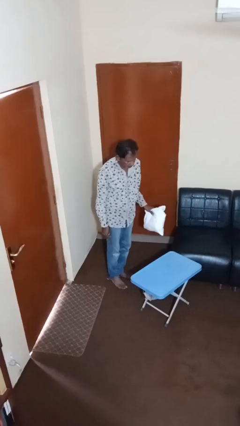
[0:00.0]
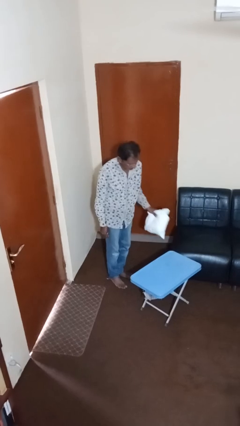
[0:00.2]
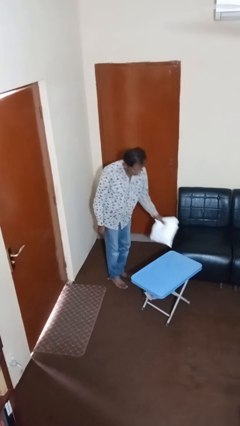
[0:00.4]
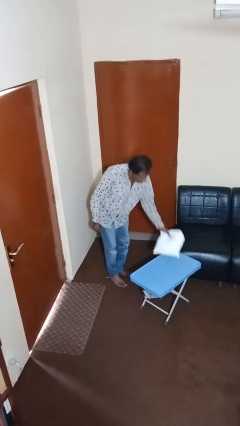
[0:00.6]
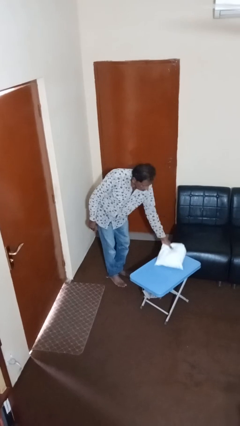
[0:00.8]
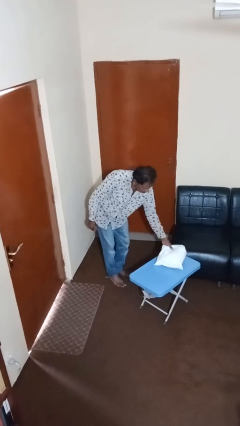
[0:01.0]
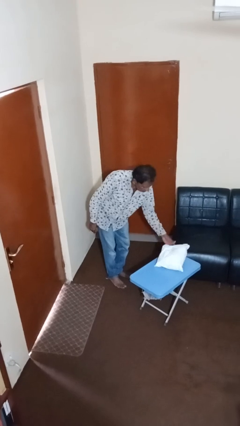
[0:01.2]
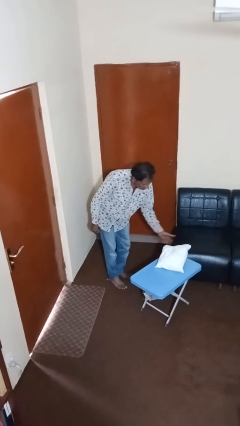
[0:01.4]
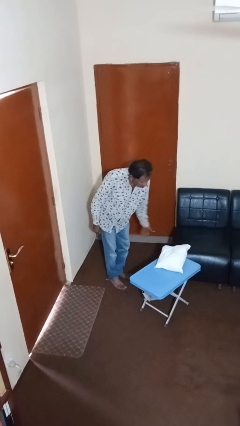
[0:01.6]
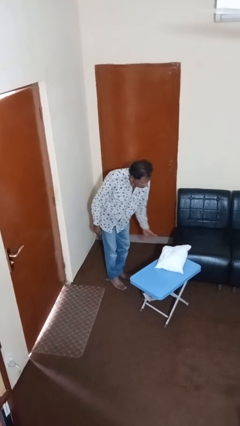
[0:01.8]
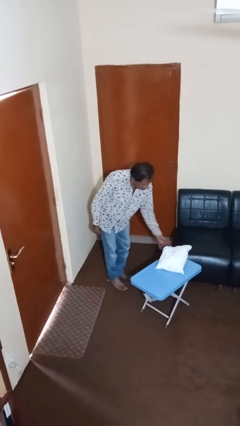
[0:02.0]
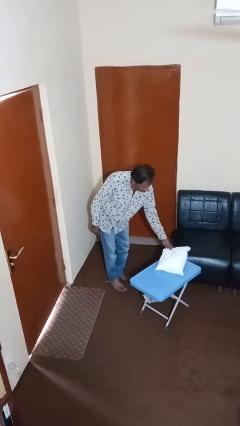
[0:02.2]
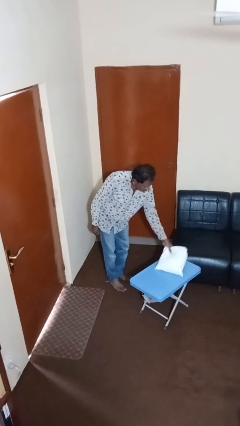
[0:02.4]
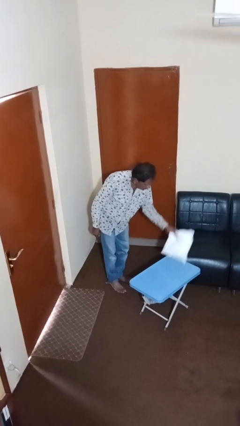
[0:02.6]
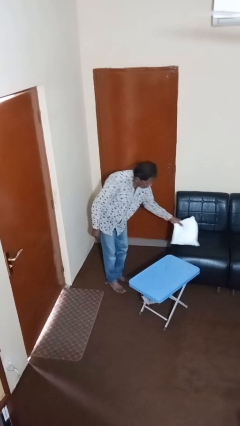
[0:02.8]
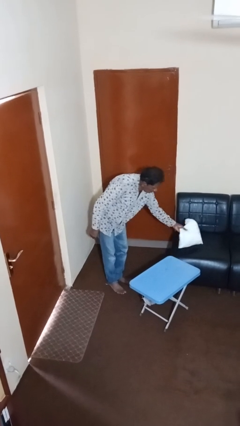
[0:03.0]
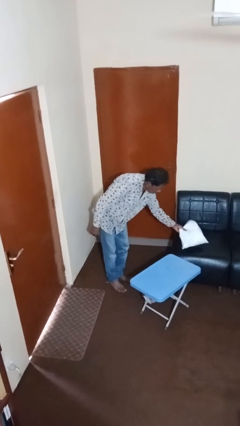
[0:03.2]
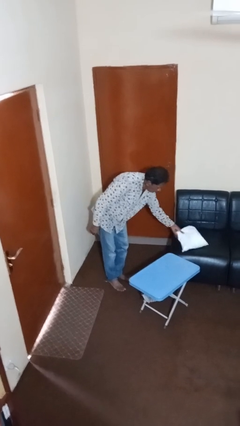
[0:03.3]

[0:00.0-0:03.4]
person puts down object on couch

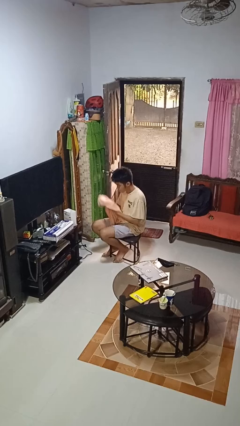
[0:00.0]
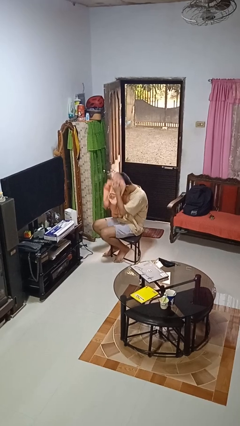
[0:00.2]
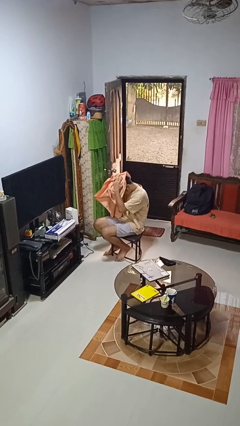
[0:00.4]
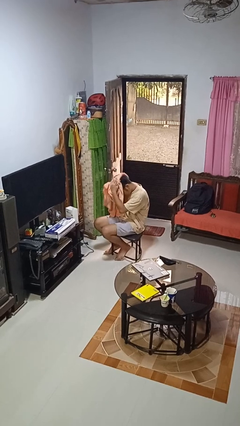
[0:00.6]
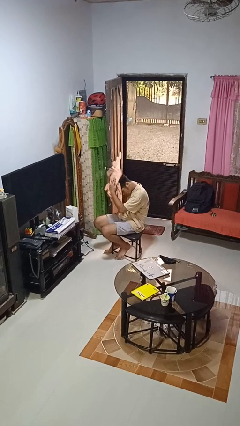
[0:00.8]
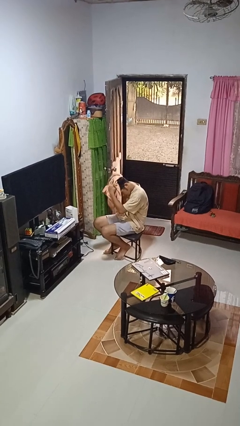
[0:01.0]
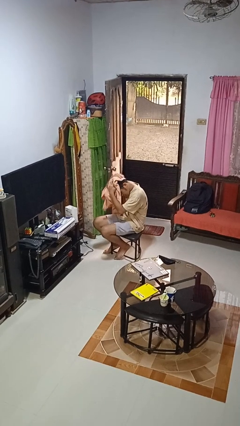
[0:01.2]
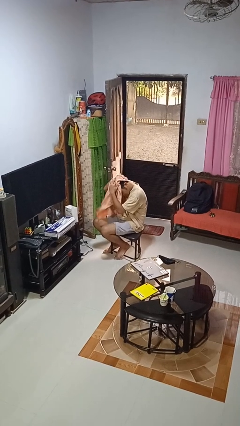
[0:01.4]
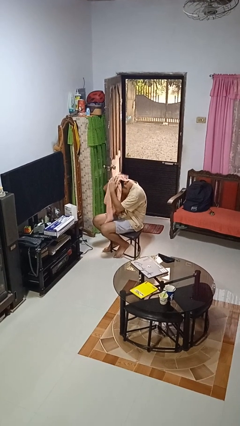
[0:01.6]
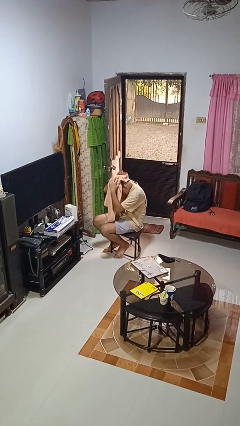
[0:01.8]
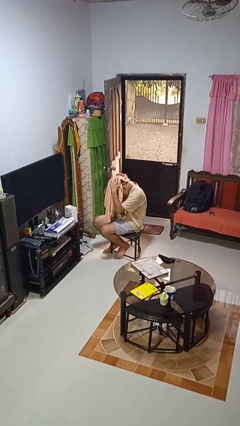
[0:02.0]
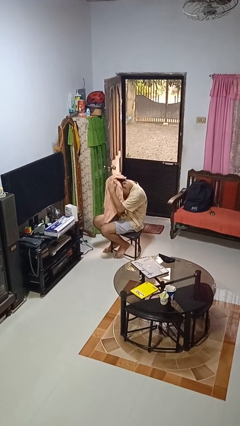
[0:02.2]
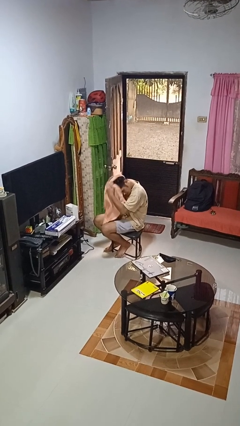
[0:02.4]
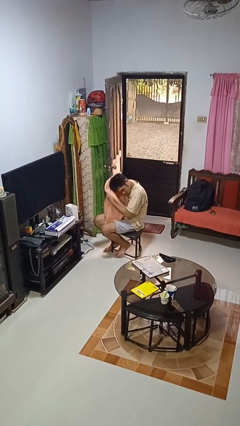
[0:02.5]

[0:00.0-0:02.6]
person dries hair with towel

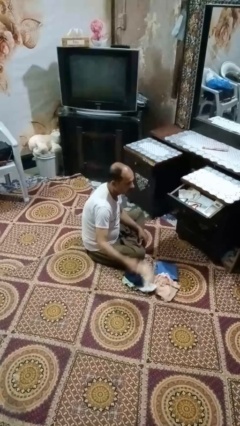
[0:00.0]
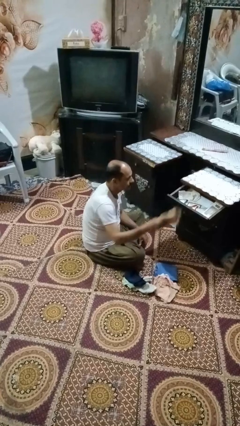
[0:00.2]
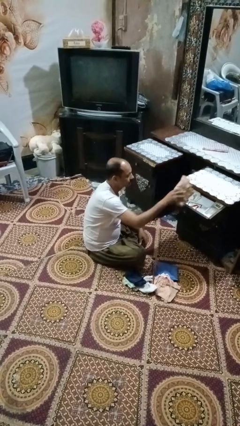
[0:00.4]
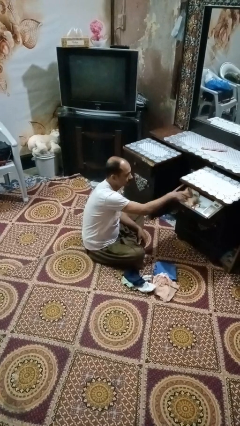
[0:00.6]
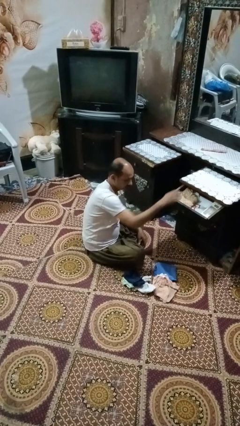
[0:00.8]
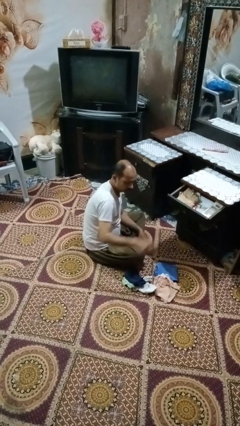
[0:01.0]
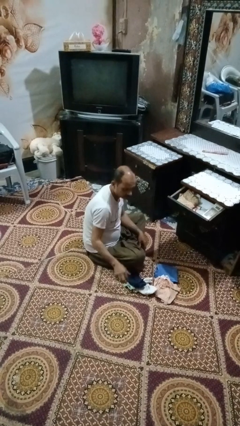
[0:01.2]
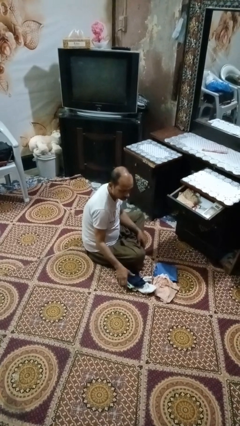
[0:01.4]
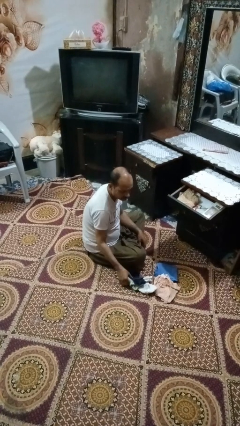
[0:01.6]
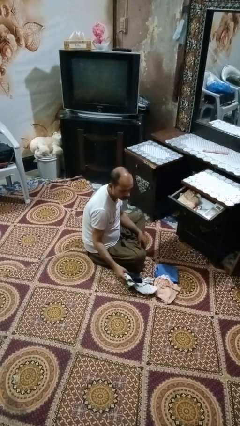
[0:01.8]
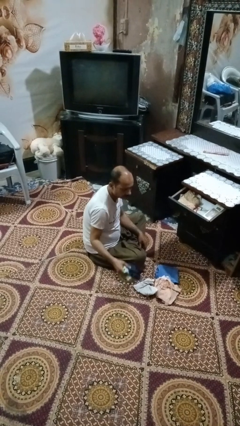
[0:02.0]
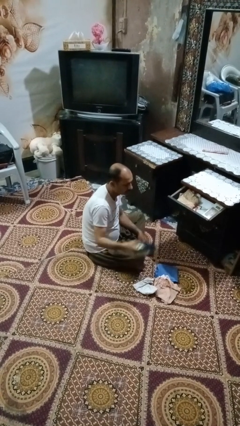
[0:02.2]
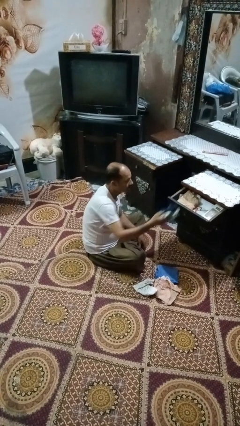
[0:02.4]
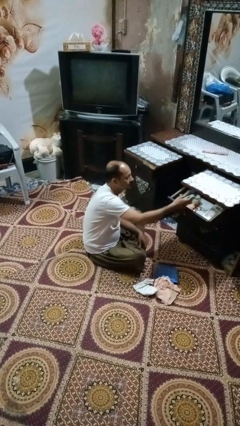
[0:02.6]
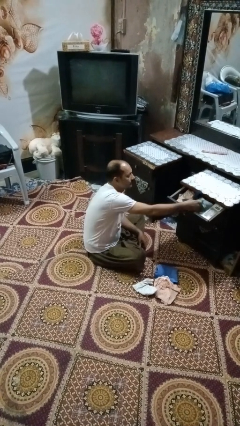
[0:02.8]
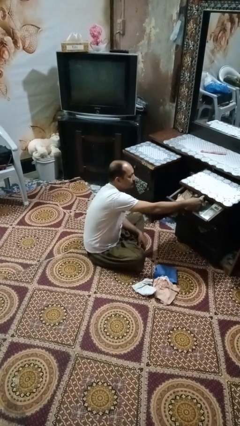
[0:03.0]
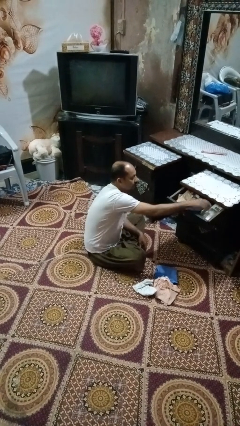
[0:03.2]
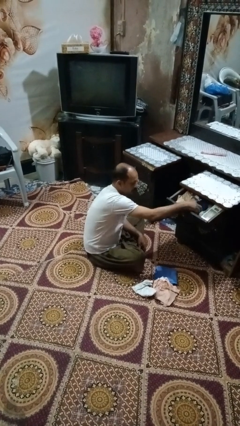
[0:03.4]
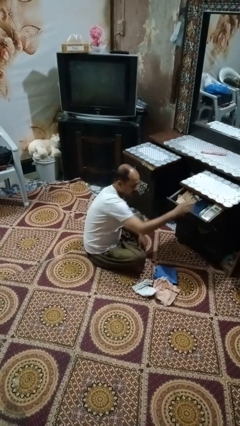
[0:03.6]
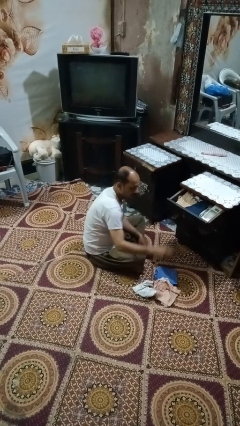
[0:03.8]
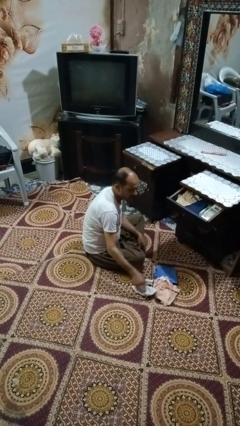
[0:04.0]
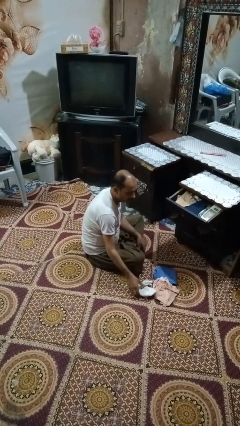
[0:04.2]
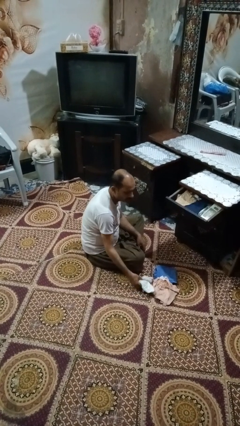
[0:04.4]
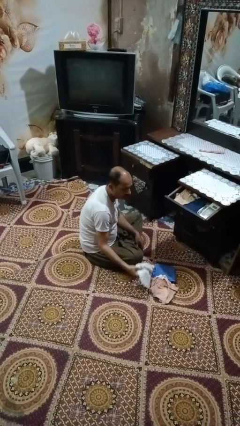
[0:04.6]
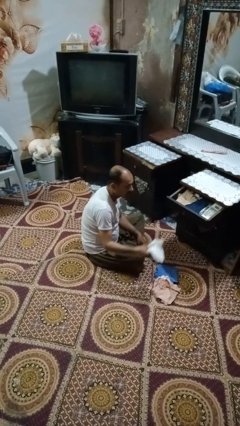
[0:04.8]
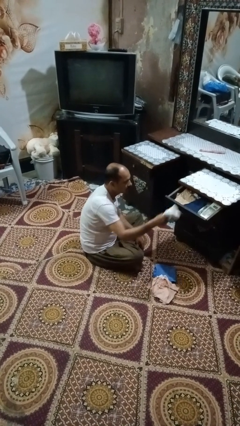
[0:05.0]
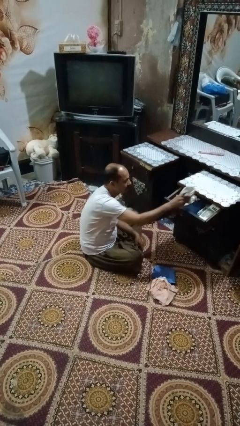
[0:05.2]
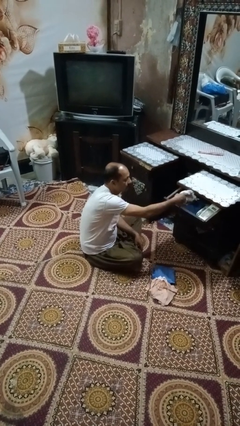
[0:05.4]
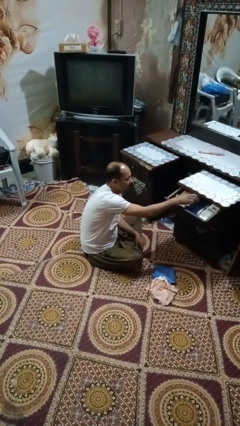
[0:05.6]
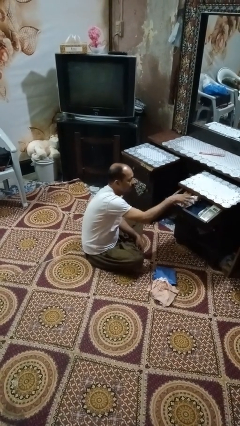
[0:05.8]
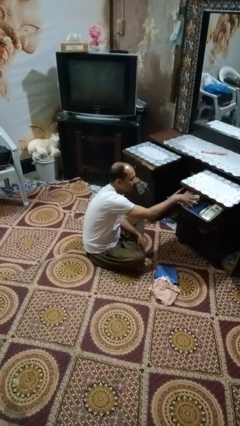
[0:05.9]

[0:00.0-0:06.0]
person puts clothes into dresser

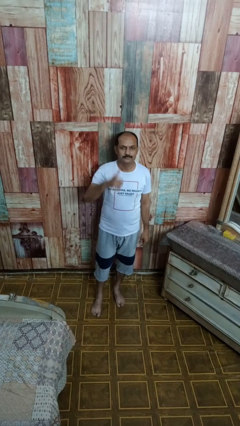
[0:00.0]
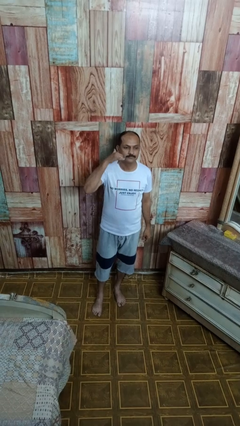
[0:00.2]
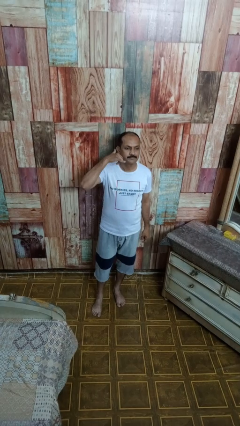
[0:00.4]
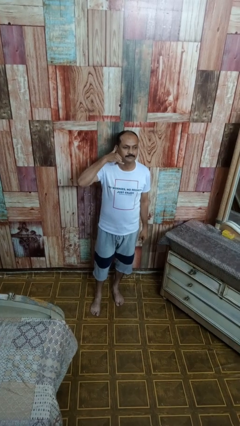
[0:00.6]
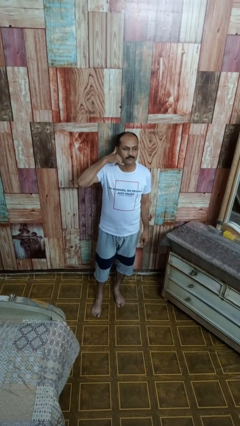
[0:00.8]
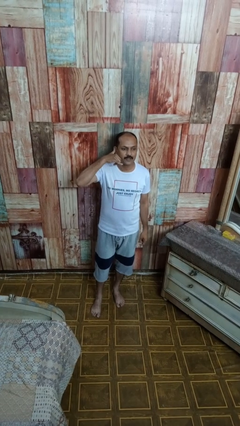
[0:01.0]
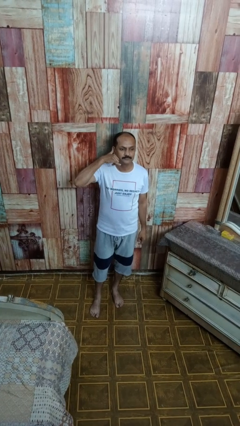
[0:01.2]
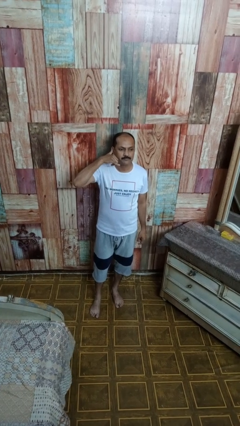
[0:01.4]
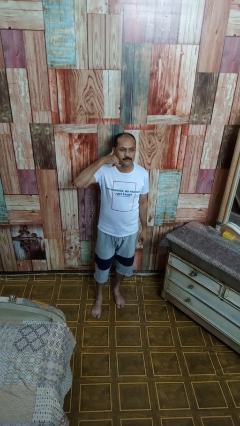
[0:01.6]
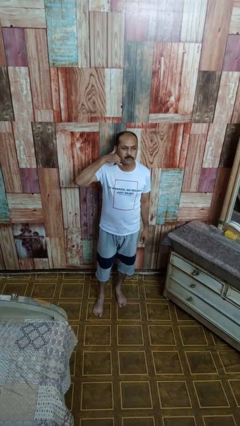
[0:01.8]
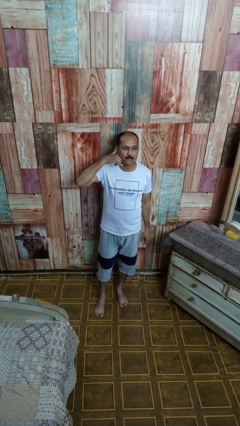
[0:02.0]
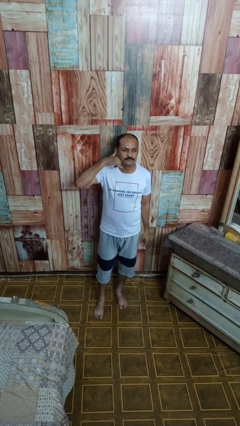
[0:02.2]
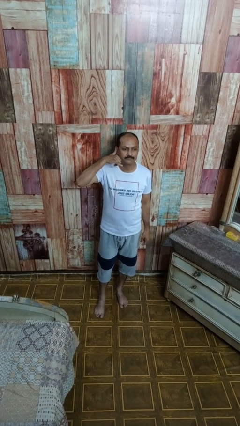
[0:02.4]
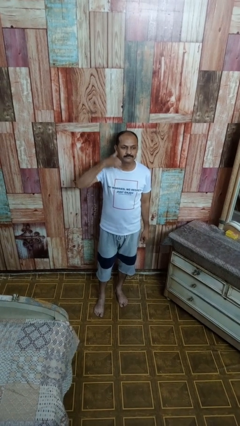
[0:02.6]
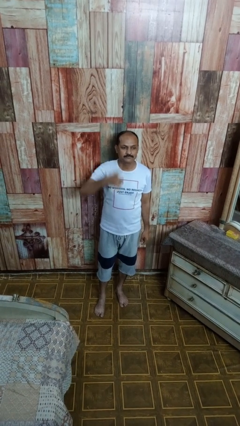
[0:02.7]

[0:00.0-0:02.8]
person gestures call me

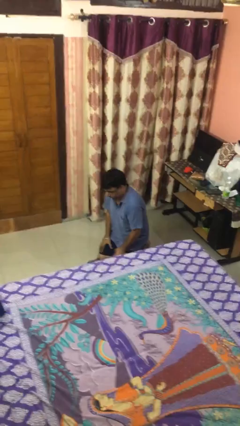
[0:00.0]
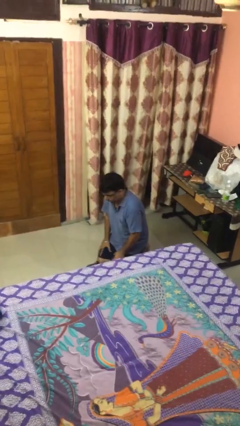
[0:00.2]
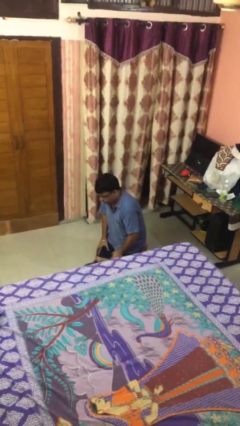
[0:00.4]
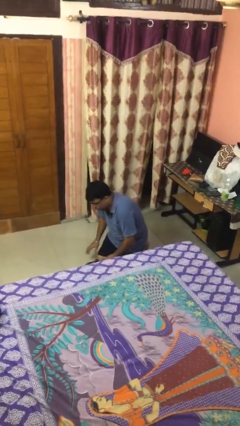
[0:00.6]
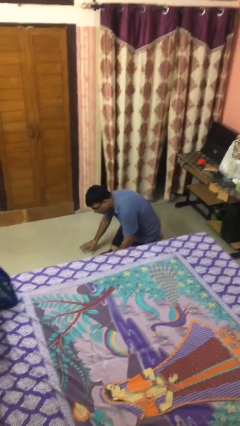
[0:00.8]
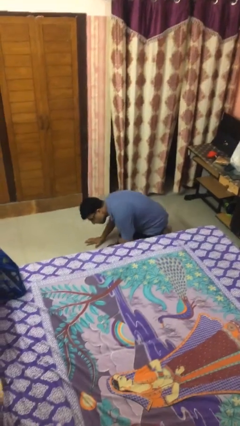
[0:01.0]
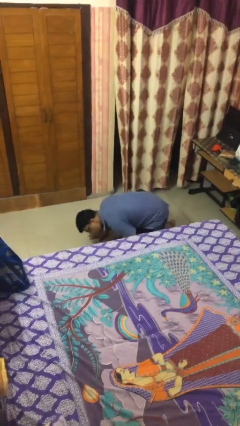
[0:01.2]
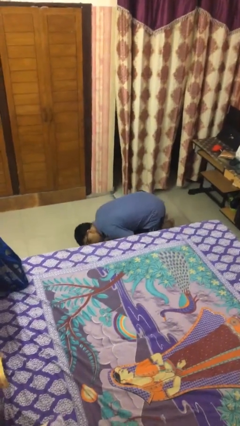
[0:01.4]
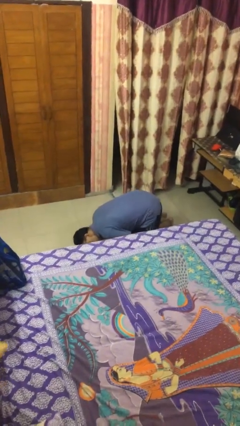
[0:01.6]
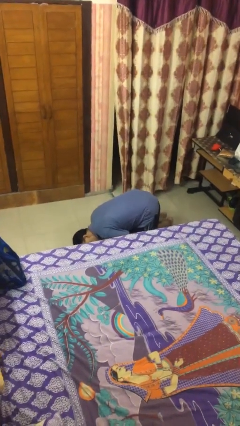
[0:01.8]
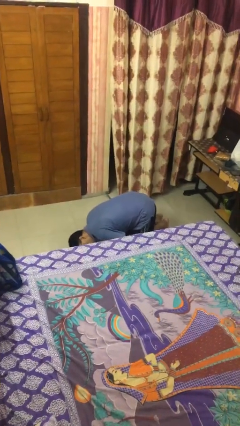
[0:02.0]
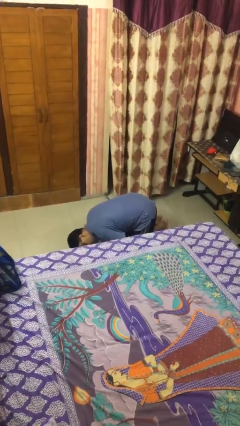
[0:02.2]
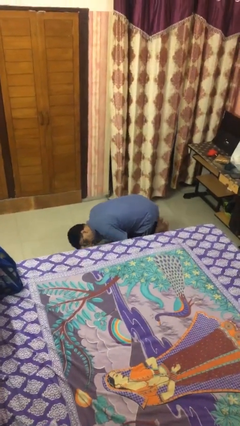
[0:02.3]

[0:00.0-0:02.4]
person searches under bed
